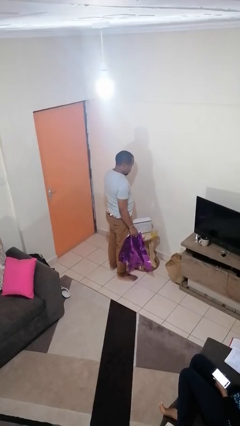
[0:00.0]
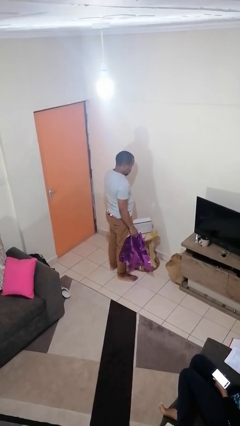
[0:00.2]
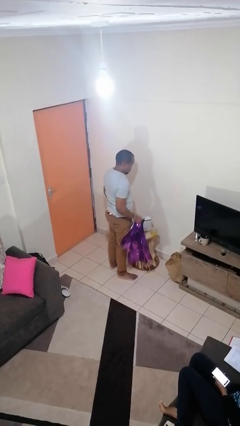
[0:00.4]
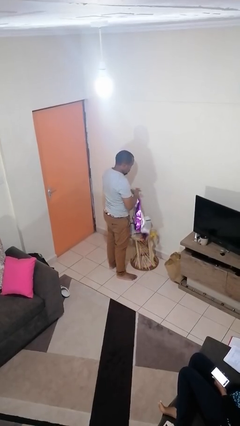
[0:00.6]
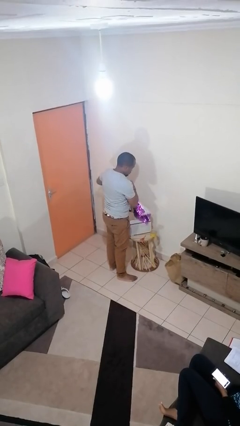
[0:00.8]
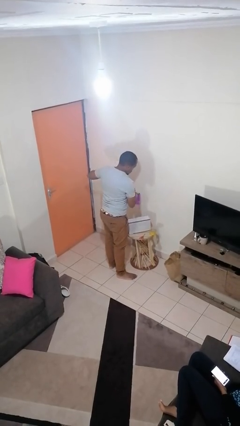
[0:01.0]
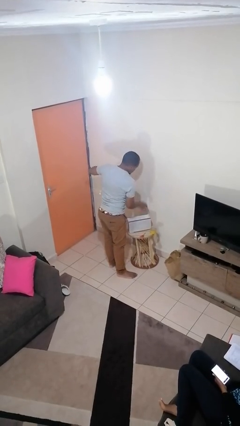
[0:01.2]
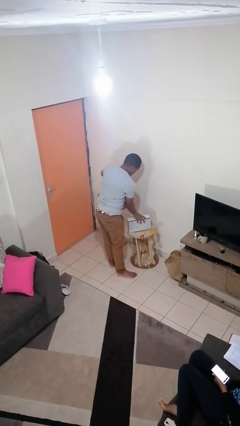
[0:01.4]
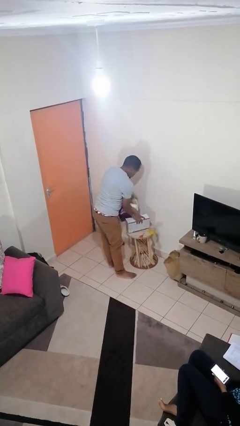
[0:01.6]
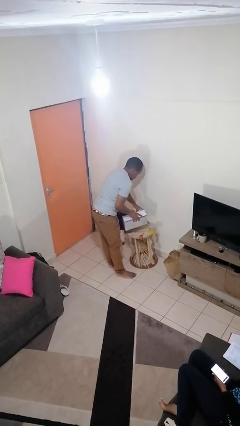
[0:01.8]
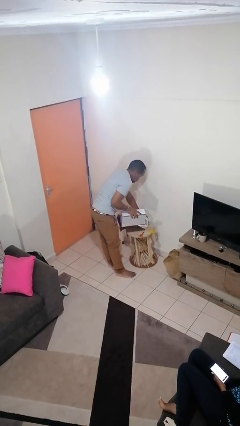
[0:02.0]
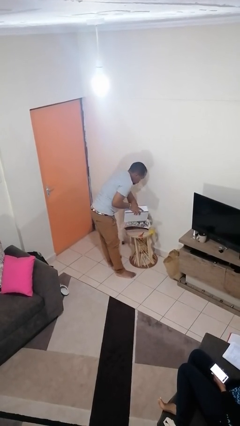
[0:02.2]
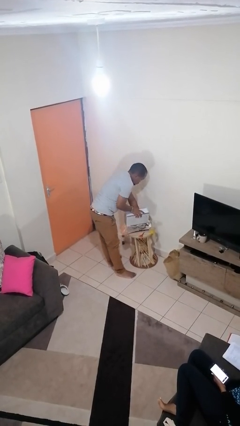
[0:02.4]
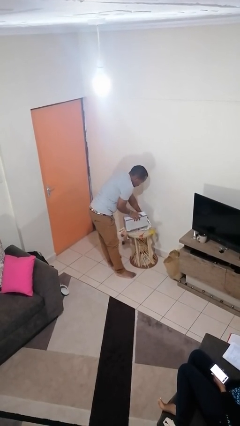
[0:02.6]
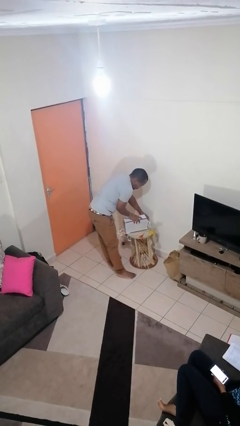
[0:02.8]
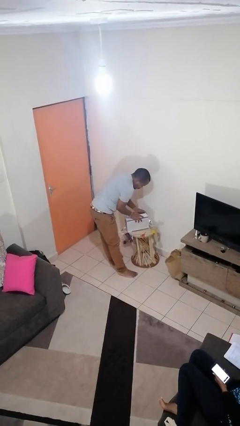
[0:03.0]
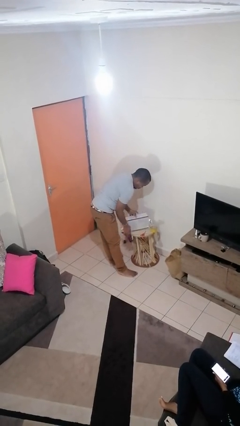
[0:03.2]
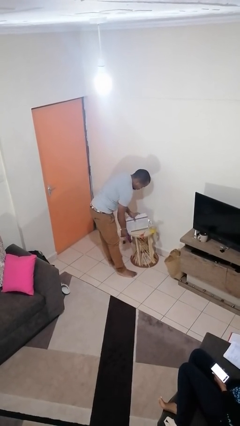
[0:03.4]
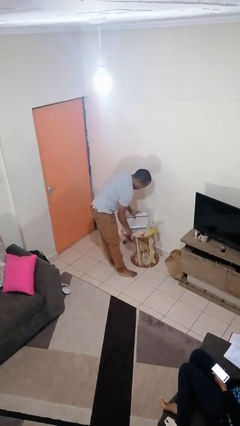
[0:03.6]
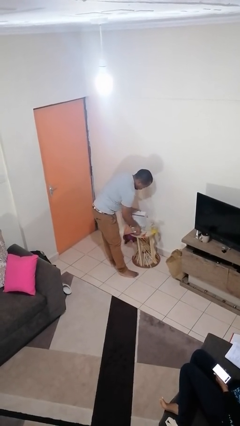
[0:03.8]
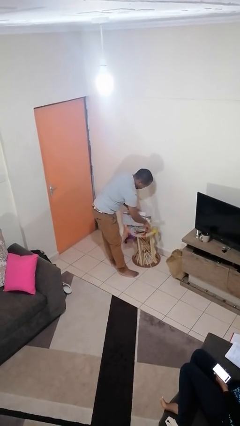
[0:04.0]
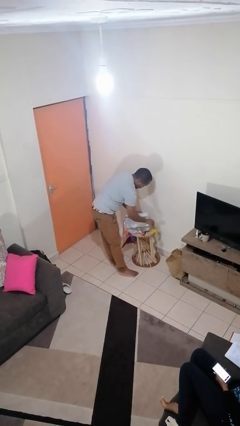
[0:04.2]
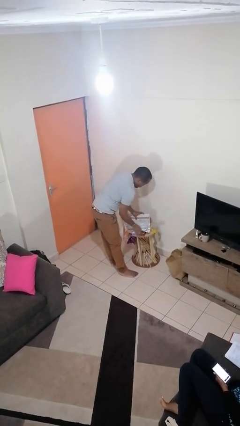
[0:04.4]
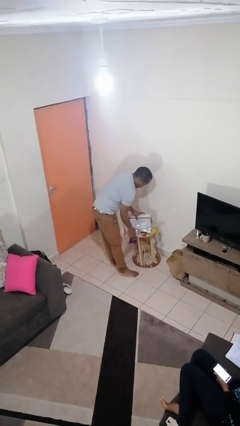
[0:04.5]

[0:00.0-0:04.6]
person wraps box

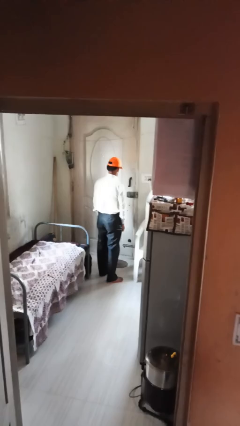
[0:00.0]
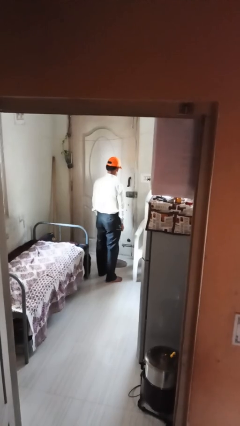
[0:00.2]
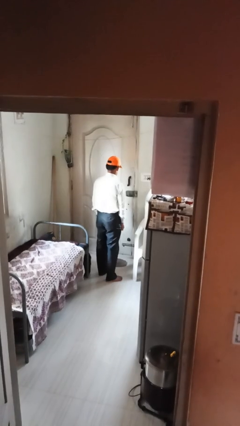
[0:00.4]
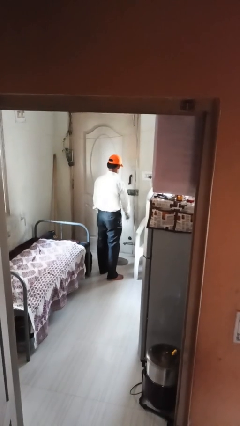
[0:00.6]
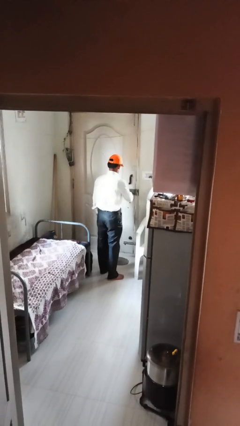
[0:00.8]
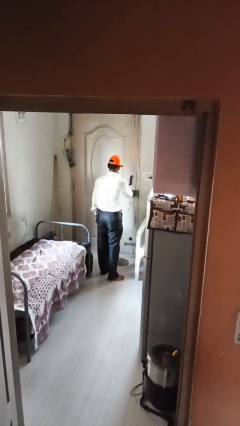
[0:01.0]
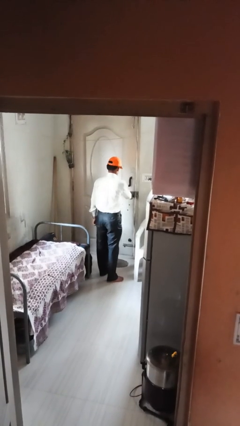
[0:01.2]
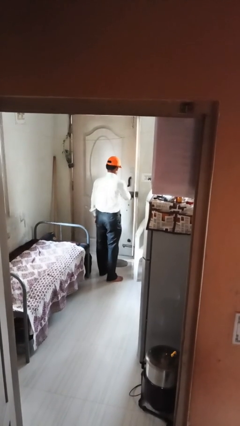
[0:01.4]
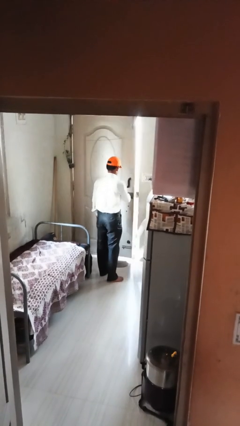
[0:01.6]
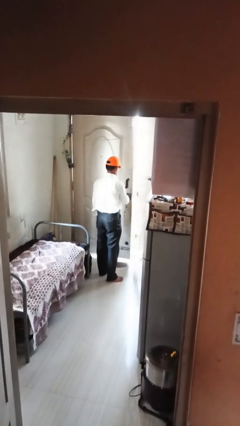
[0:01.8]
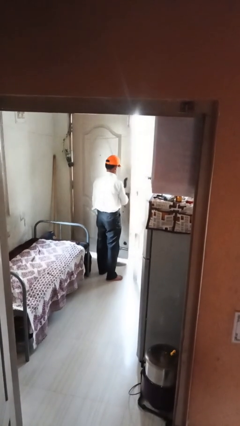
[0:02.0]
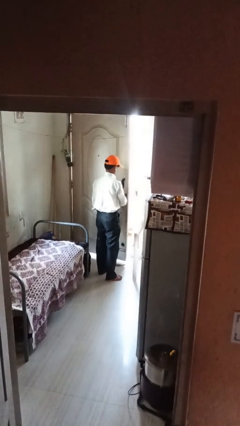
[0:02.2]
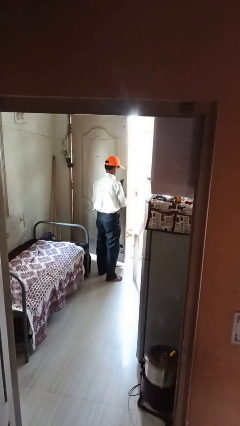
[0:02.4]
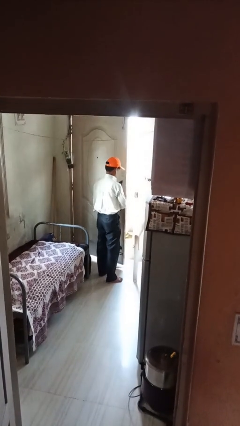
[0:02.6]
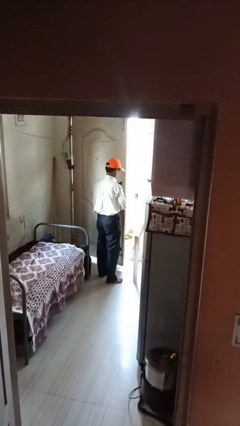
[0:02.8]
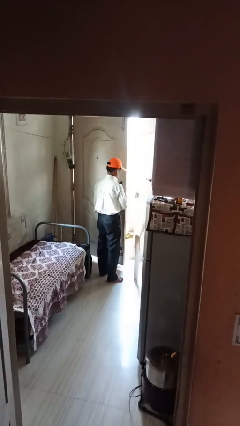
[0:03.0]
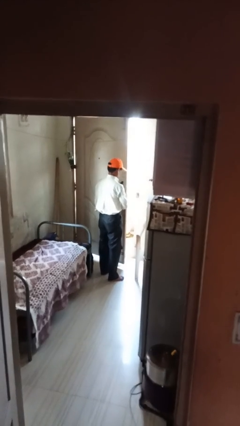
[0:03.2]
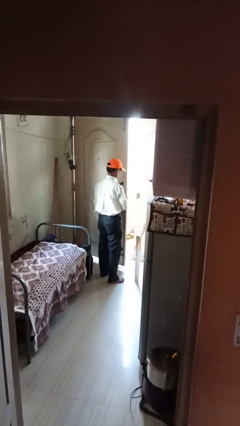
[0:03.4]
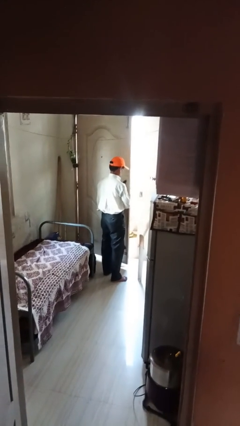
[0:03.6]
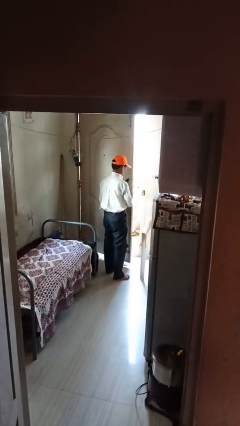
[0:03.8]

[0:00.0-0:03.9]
person opens facility door

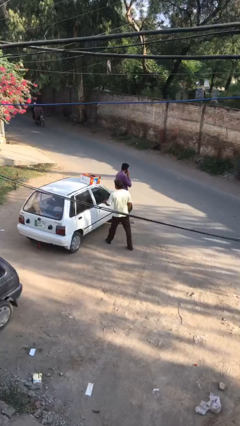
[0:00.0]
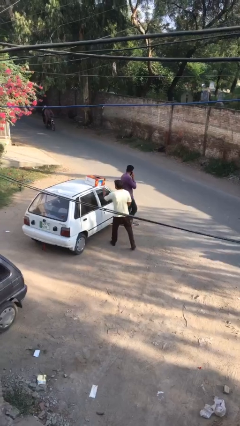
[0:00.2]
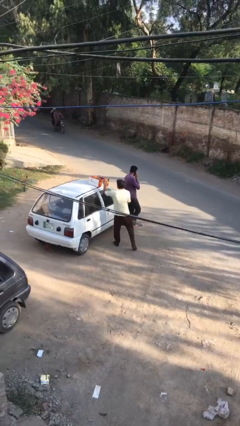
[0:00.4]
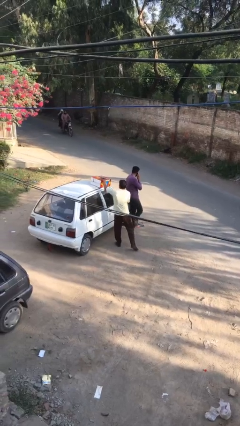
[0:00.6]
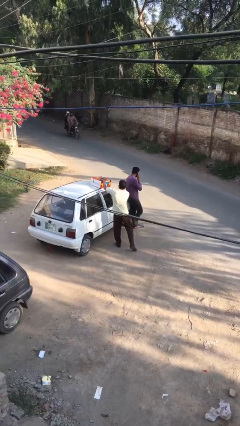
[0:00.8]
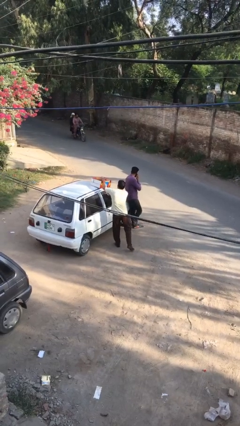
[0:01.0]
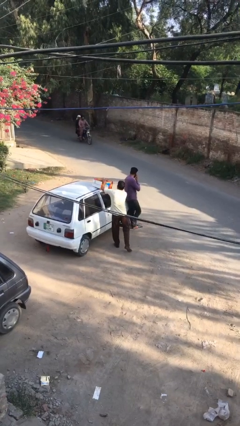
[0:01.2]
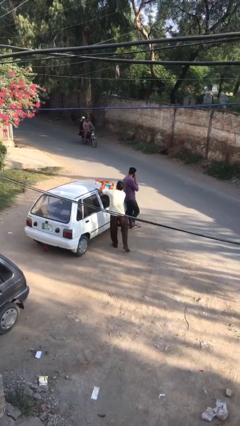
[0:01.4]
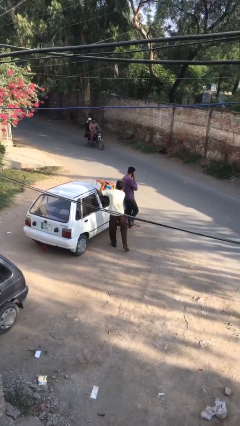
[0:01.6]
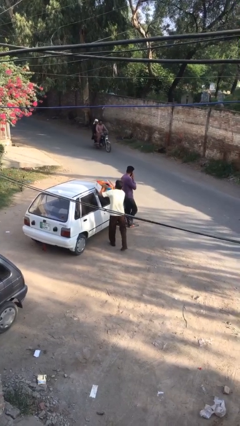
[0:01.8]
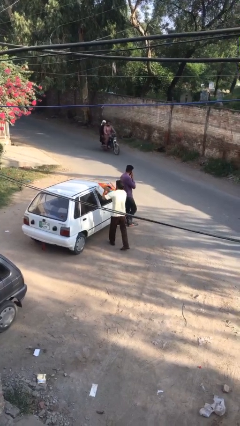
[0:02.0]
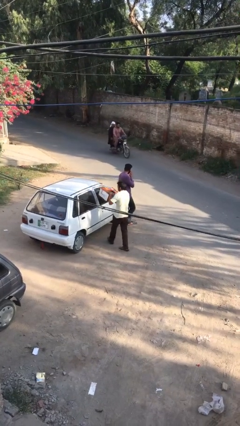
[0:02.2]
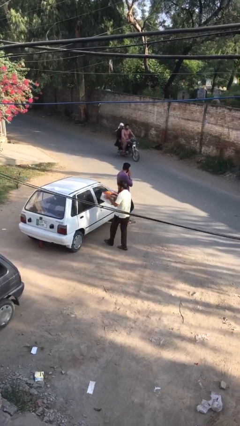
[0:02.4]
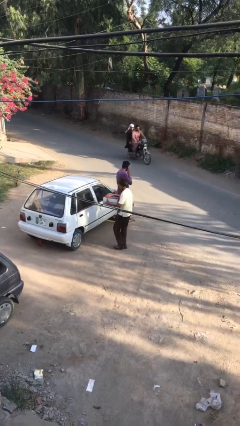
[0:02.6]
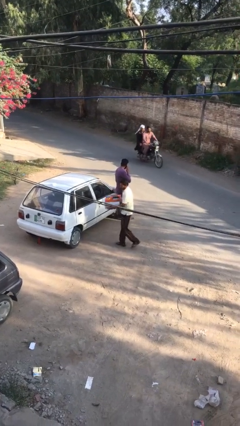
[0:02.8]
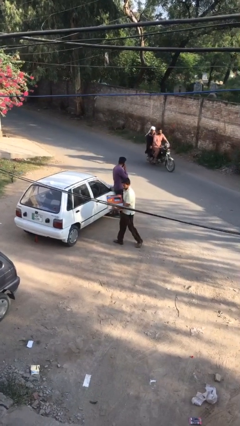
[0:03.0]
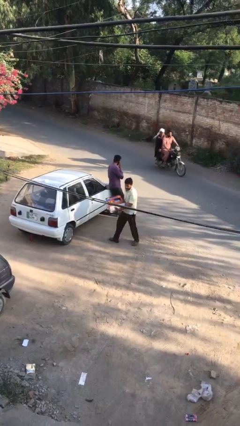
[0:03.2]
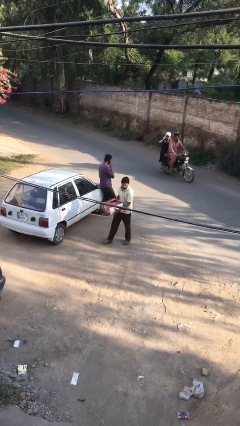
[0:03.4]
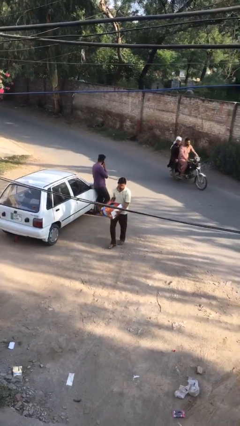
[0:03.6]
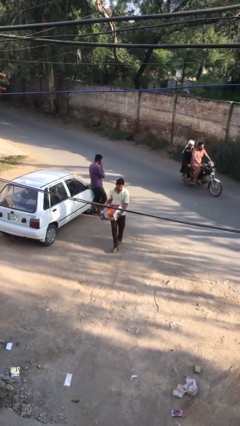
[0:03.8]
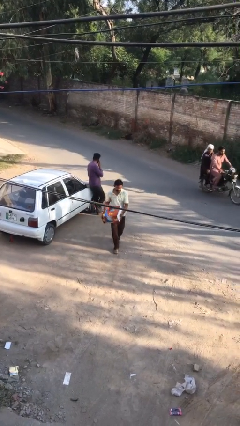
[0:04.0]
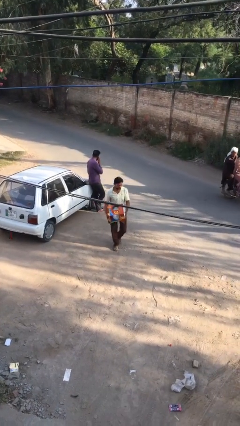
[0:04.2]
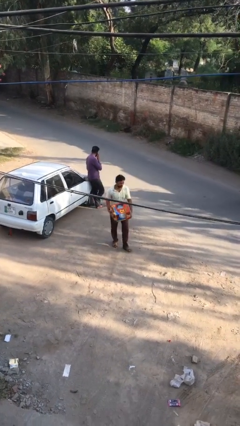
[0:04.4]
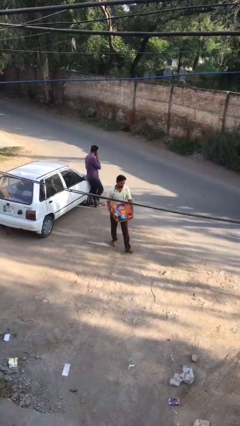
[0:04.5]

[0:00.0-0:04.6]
person steals object from person

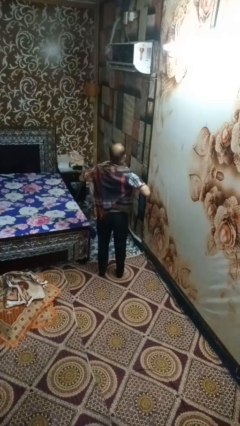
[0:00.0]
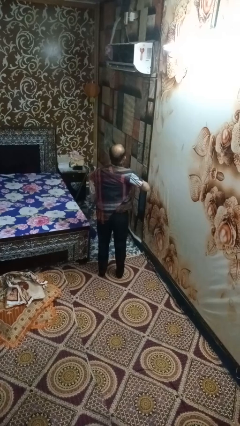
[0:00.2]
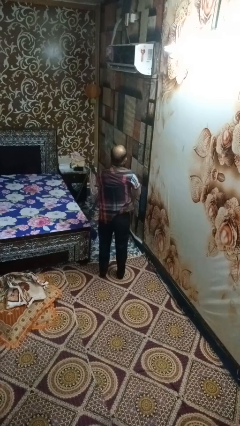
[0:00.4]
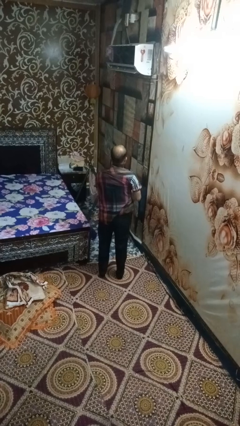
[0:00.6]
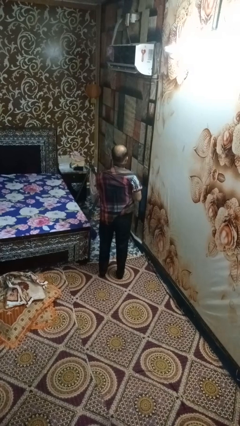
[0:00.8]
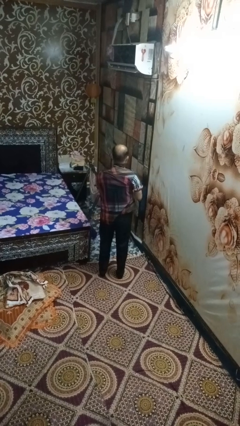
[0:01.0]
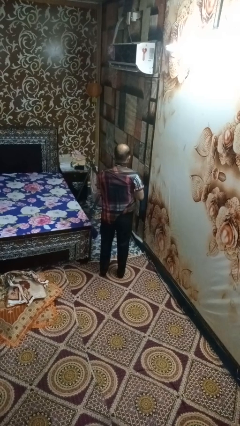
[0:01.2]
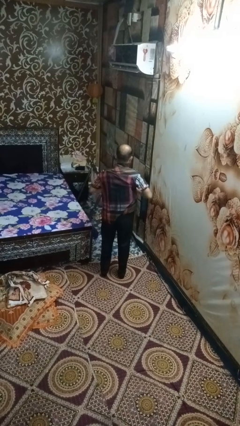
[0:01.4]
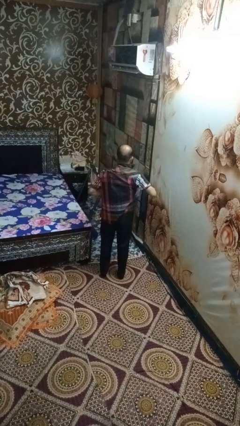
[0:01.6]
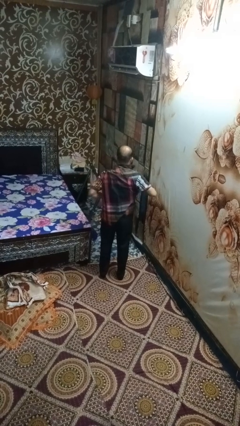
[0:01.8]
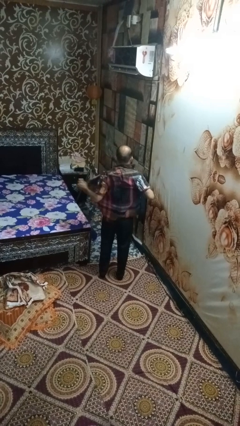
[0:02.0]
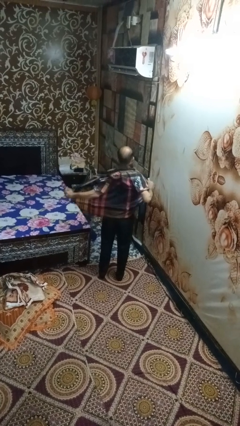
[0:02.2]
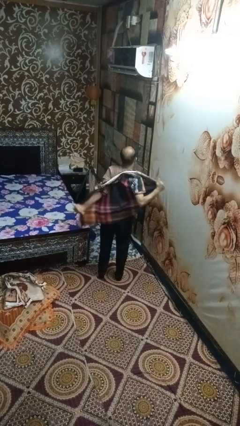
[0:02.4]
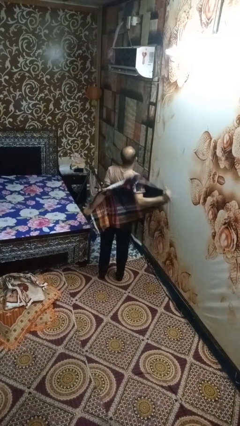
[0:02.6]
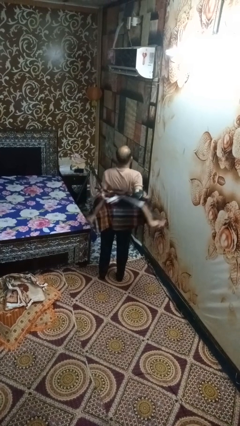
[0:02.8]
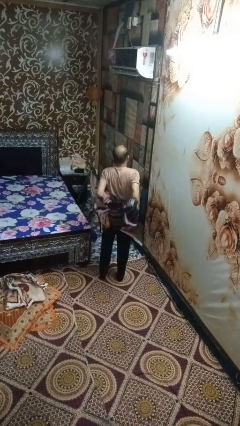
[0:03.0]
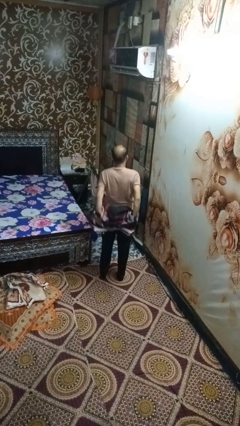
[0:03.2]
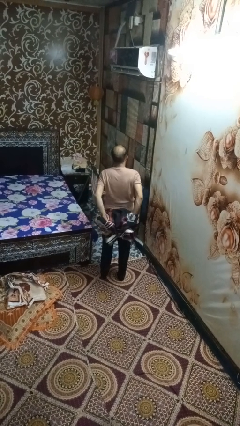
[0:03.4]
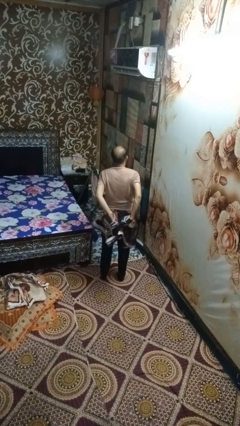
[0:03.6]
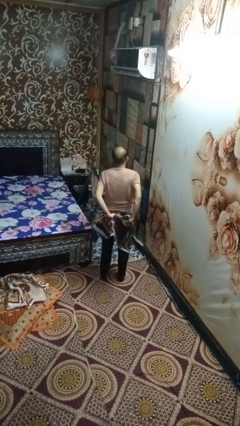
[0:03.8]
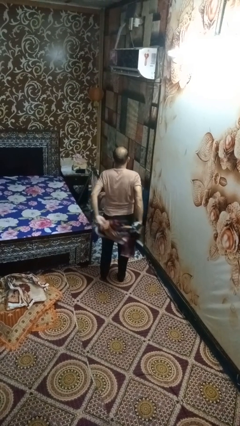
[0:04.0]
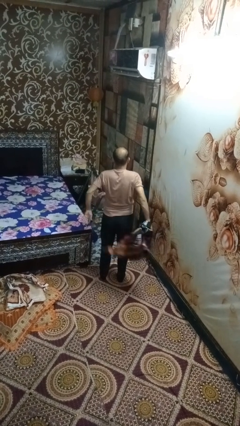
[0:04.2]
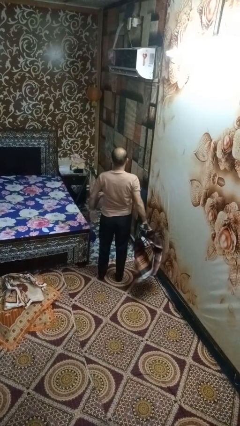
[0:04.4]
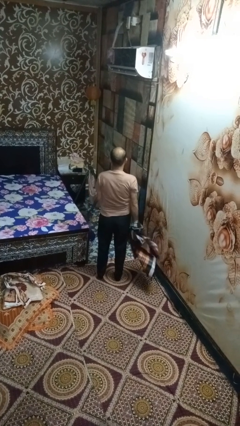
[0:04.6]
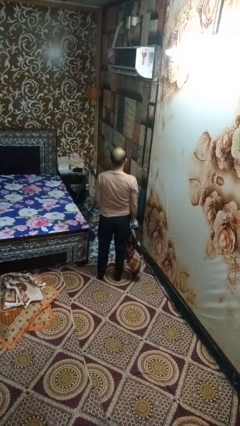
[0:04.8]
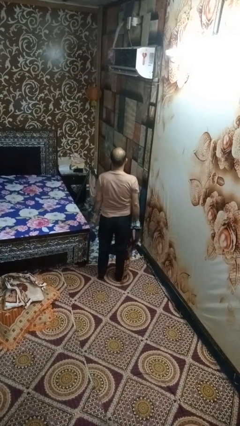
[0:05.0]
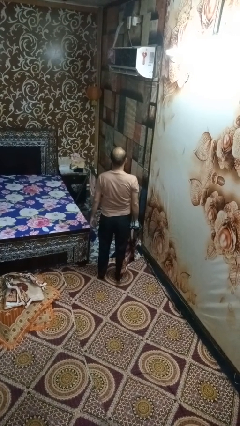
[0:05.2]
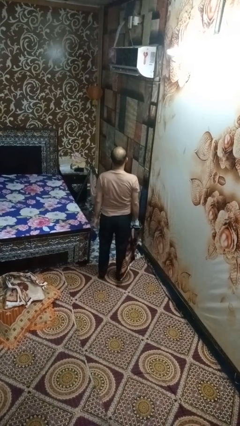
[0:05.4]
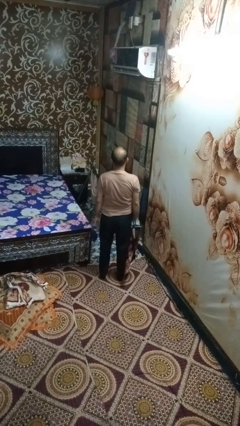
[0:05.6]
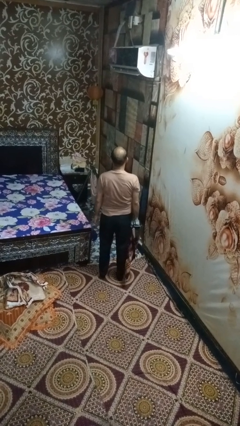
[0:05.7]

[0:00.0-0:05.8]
person takes off shirt
